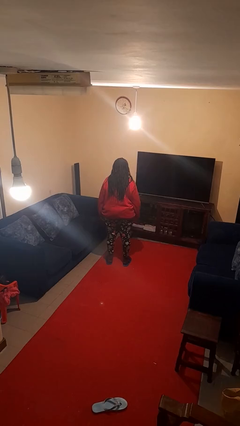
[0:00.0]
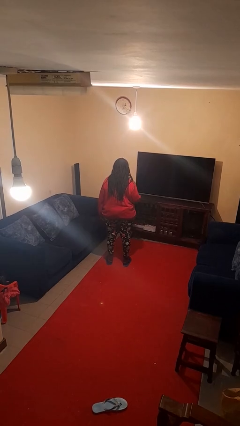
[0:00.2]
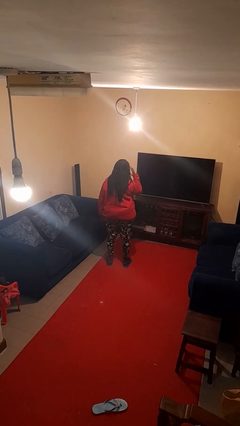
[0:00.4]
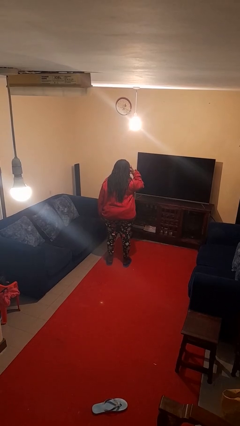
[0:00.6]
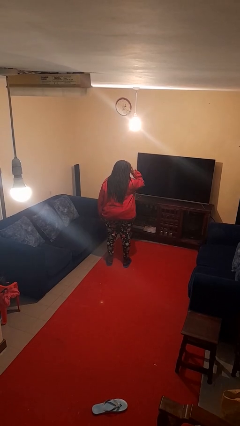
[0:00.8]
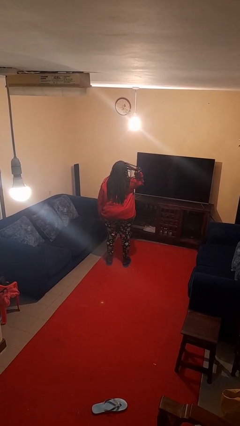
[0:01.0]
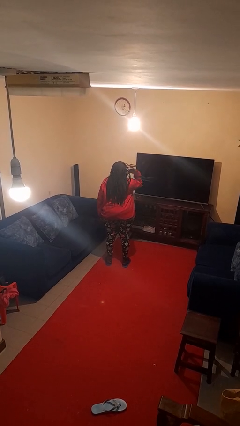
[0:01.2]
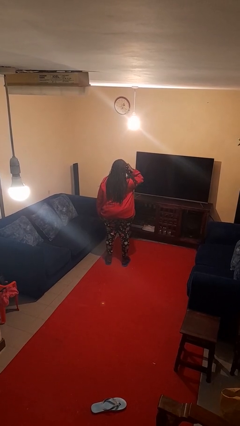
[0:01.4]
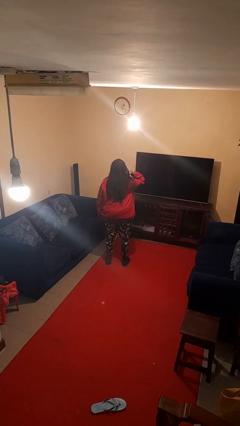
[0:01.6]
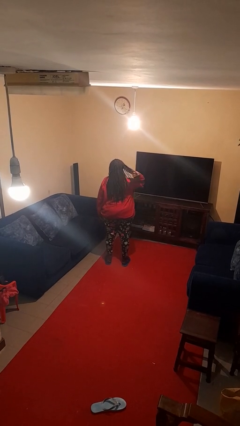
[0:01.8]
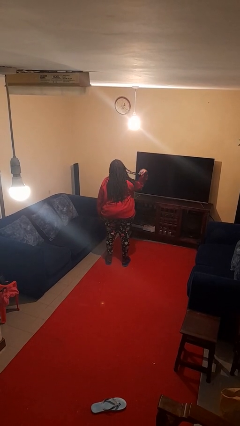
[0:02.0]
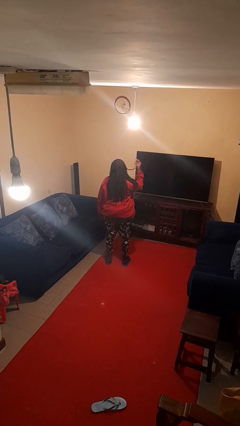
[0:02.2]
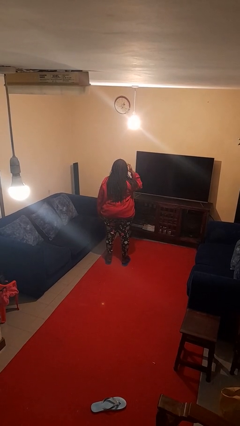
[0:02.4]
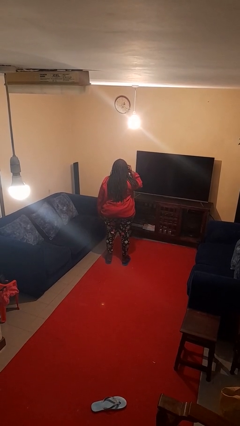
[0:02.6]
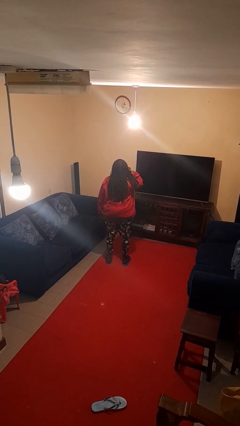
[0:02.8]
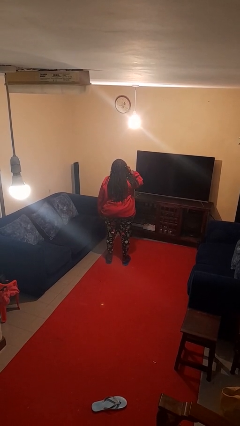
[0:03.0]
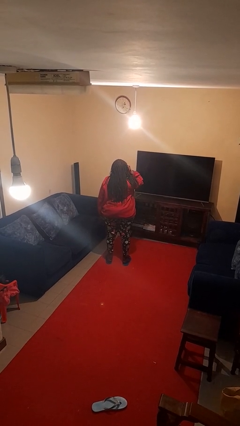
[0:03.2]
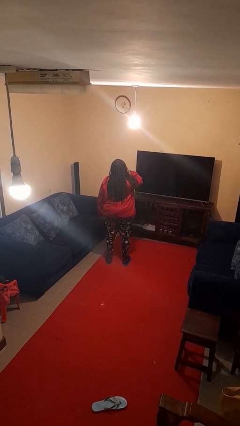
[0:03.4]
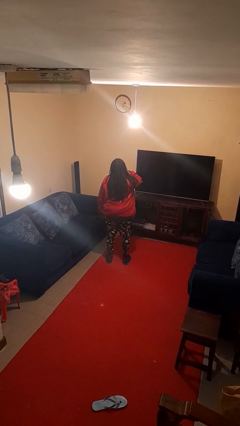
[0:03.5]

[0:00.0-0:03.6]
person strokes hair

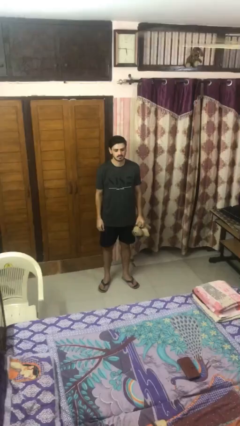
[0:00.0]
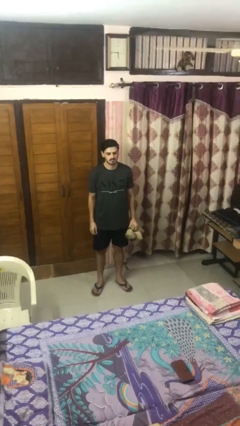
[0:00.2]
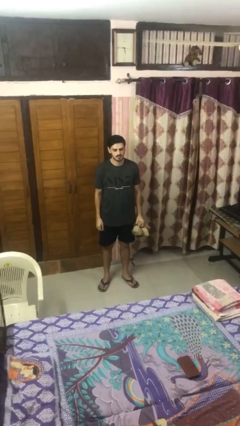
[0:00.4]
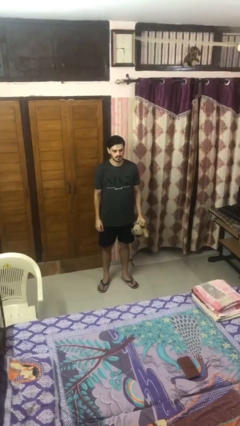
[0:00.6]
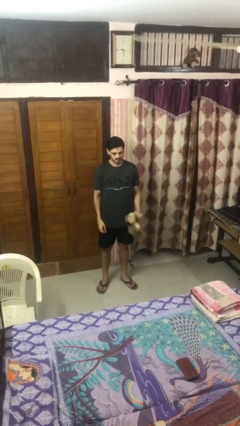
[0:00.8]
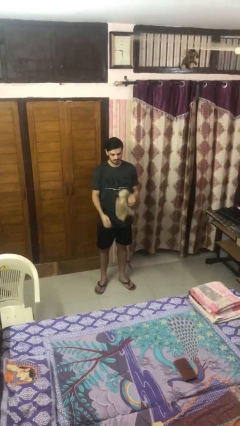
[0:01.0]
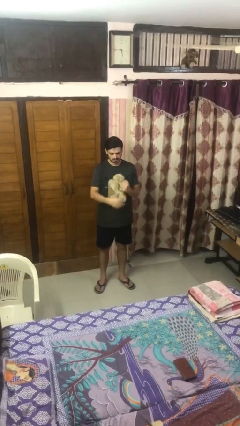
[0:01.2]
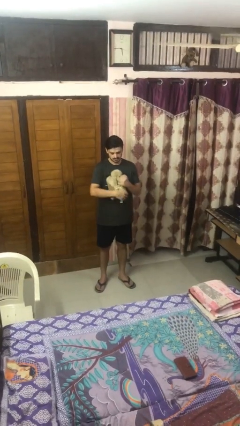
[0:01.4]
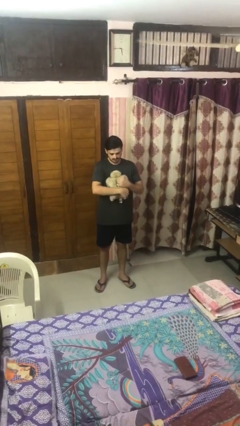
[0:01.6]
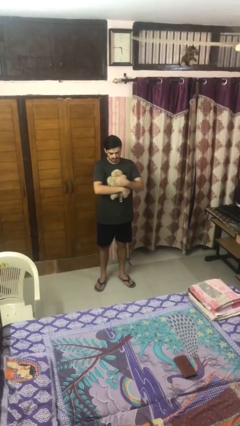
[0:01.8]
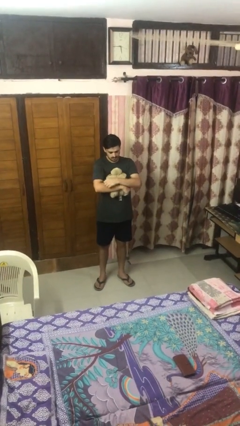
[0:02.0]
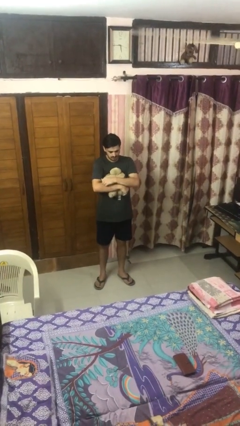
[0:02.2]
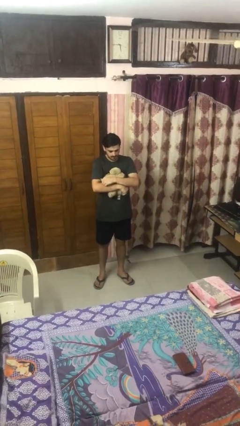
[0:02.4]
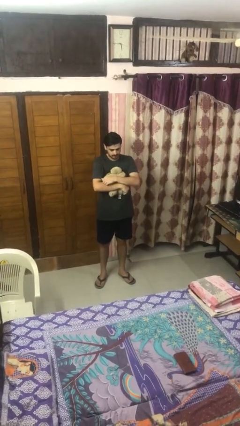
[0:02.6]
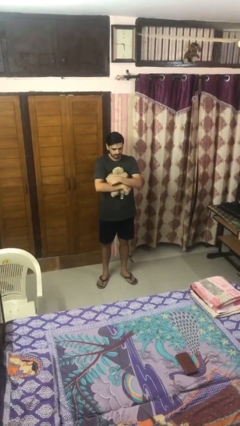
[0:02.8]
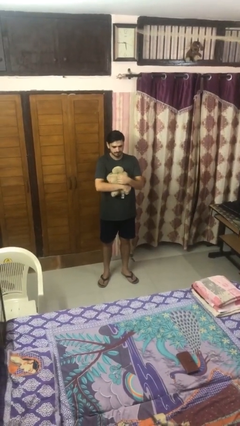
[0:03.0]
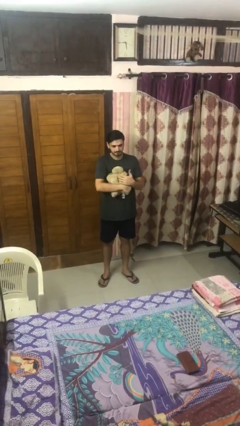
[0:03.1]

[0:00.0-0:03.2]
person hugs stuffed animal

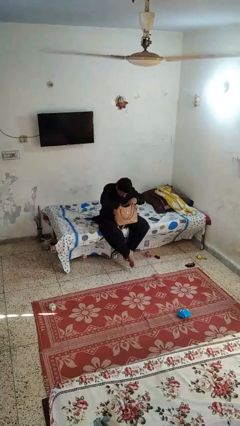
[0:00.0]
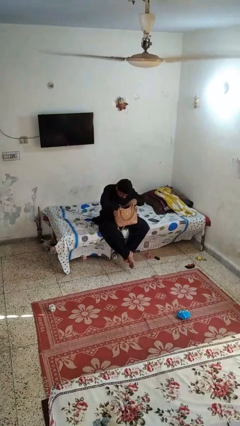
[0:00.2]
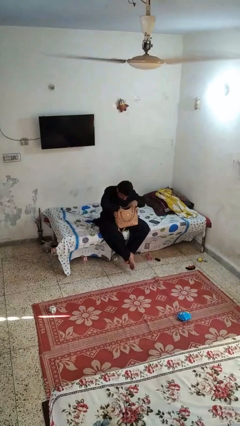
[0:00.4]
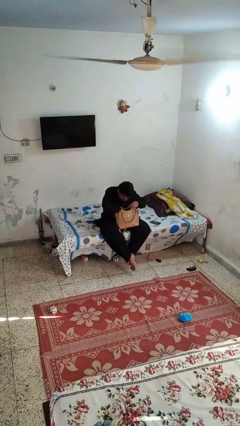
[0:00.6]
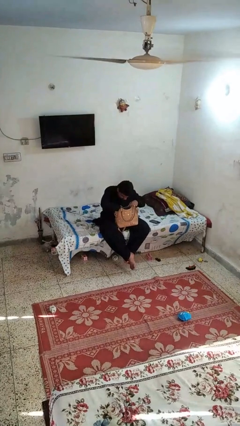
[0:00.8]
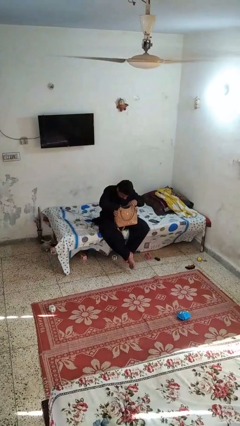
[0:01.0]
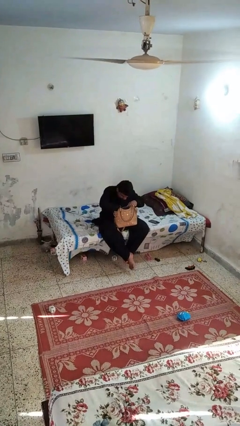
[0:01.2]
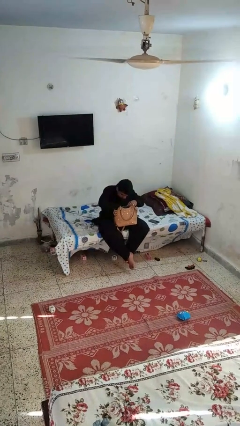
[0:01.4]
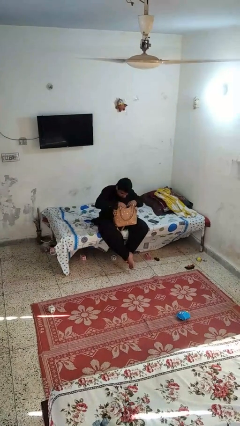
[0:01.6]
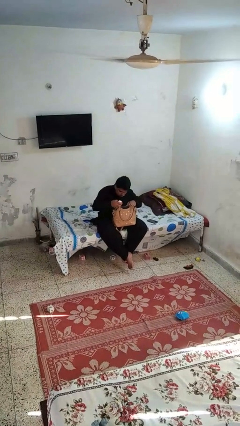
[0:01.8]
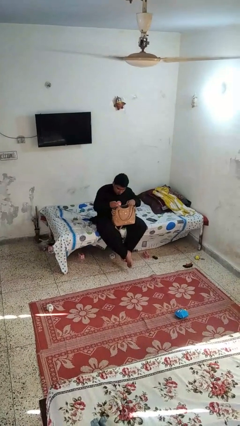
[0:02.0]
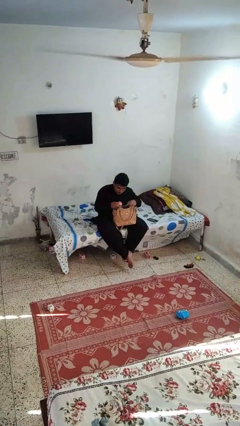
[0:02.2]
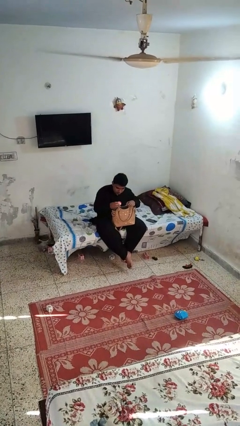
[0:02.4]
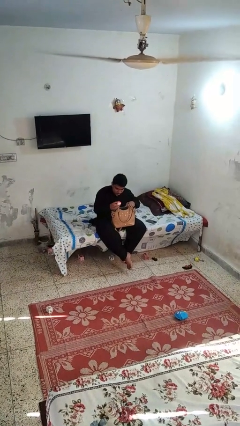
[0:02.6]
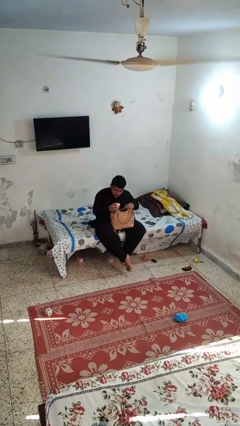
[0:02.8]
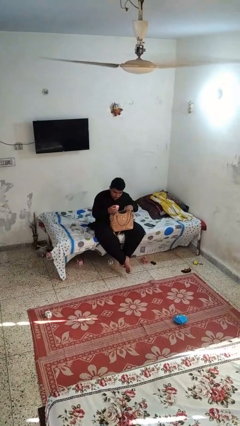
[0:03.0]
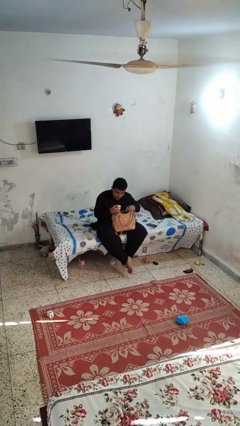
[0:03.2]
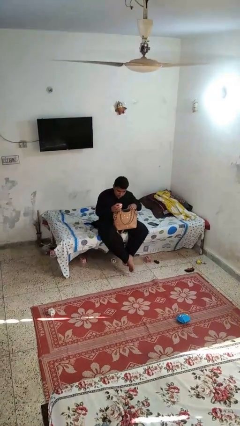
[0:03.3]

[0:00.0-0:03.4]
person takes object from purse

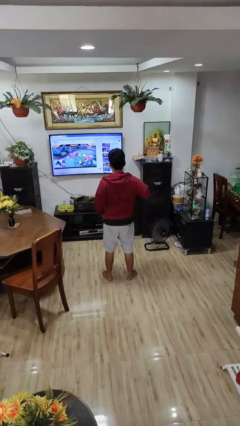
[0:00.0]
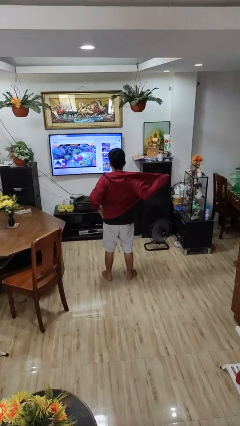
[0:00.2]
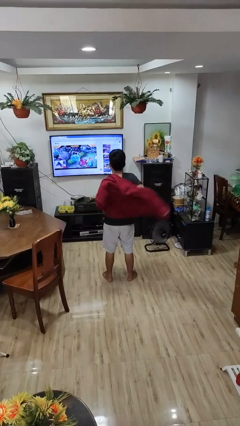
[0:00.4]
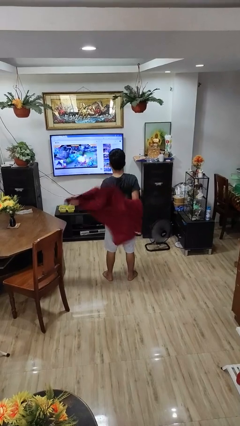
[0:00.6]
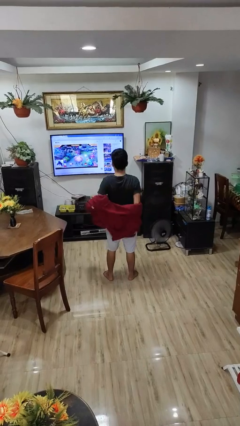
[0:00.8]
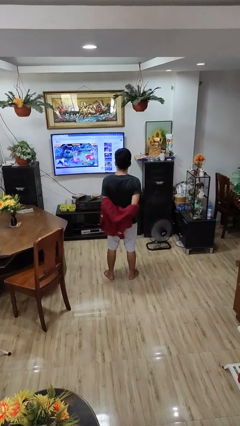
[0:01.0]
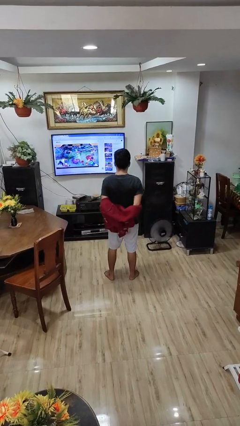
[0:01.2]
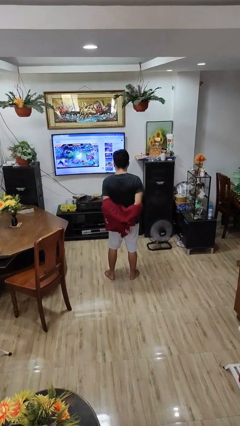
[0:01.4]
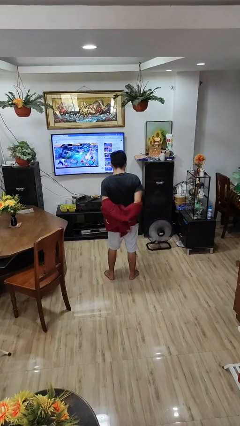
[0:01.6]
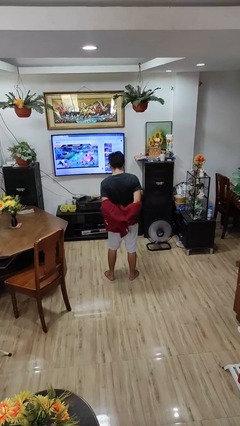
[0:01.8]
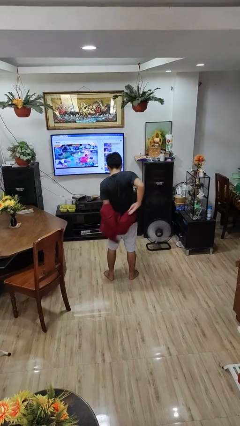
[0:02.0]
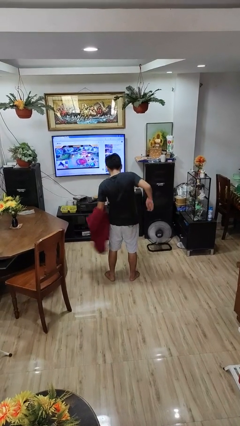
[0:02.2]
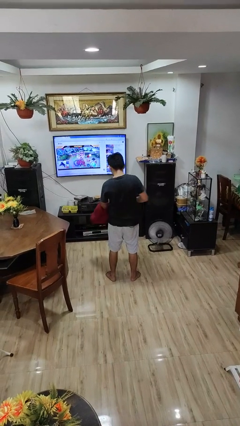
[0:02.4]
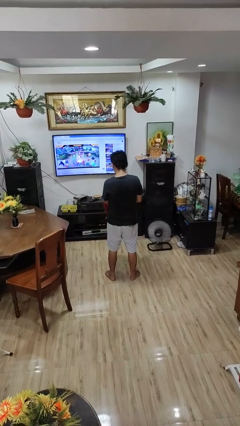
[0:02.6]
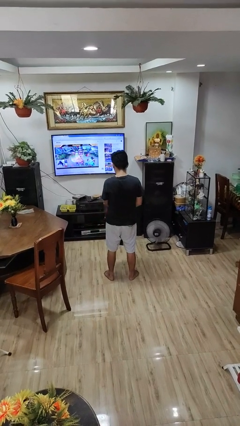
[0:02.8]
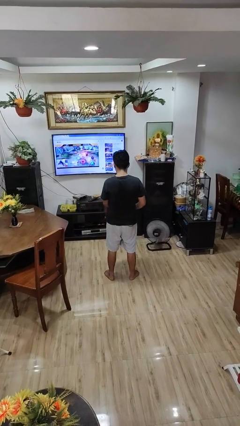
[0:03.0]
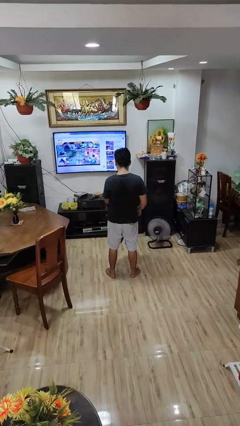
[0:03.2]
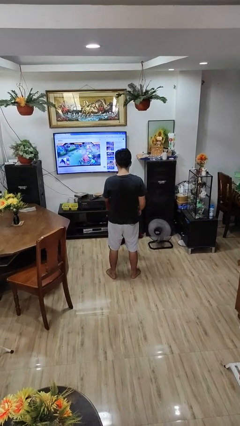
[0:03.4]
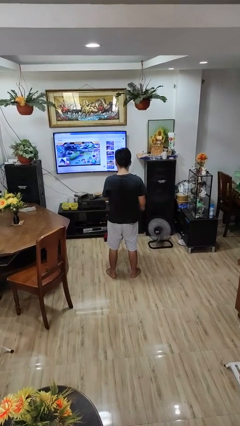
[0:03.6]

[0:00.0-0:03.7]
person takes off jacket

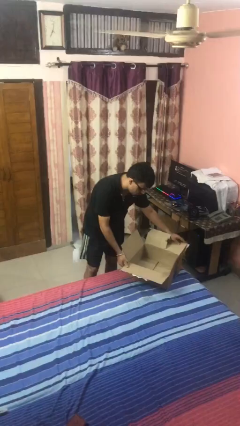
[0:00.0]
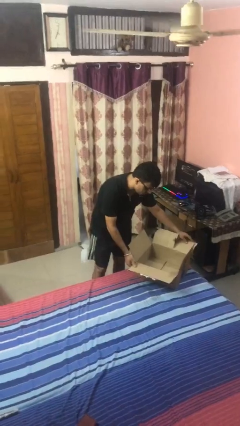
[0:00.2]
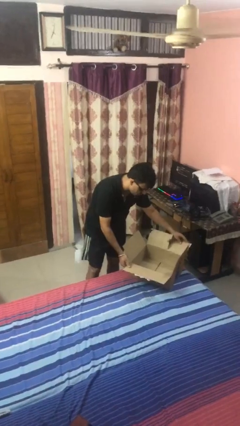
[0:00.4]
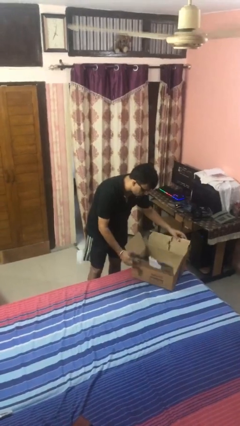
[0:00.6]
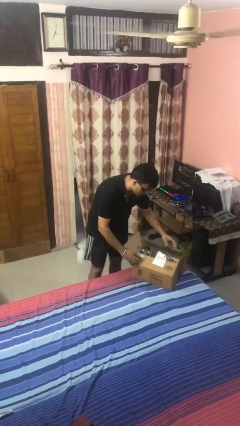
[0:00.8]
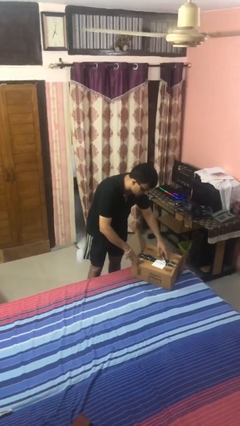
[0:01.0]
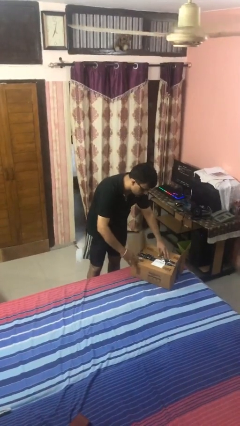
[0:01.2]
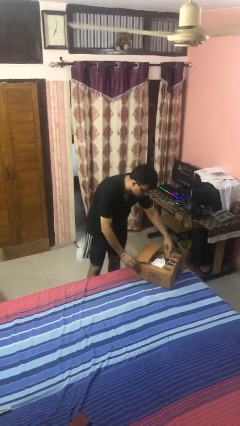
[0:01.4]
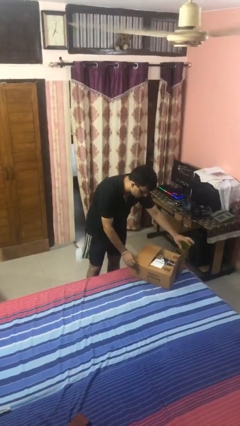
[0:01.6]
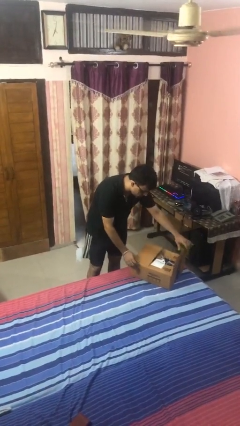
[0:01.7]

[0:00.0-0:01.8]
person closes box

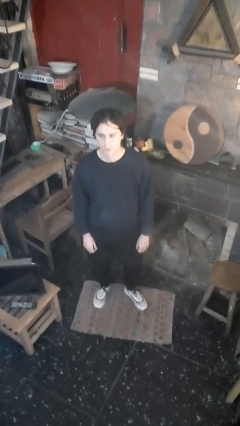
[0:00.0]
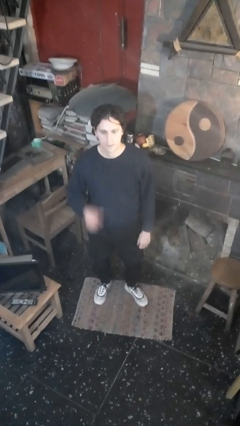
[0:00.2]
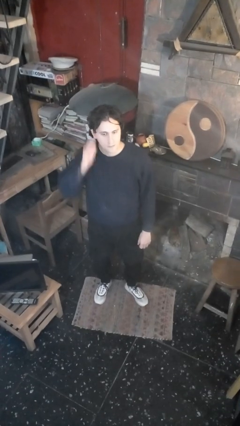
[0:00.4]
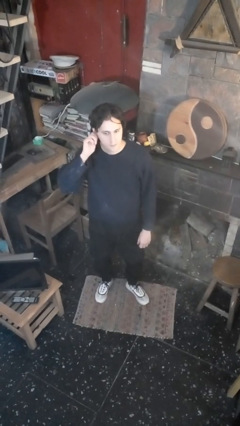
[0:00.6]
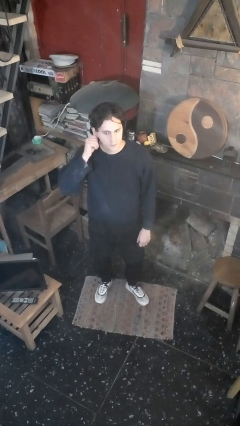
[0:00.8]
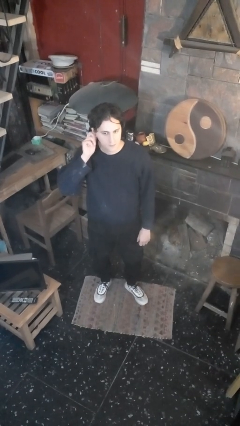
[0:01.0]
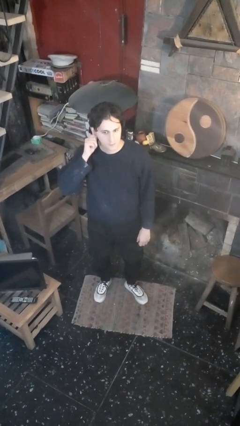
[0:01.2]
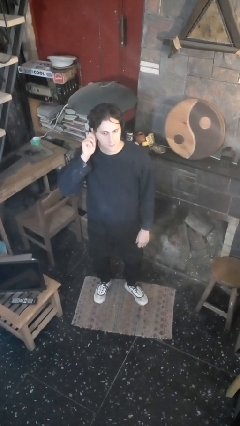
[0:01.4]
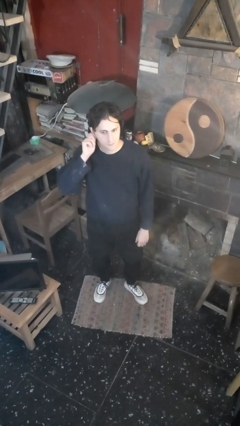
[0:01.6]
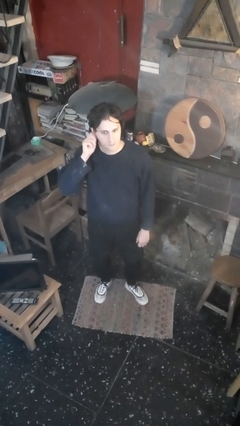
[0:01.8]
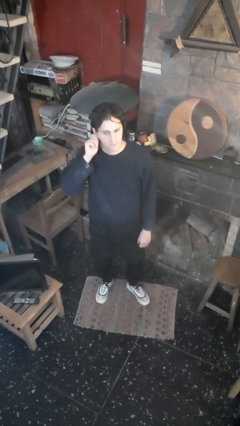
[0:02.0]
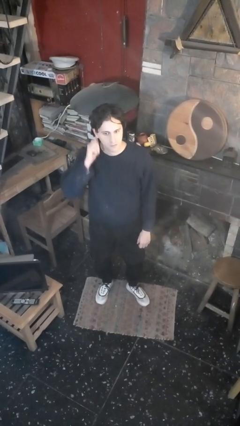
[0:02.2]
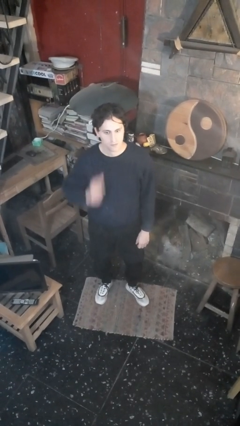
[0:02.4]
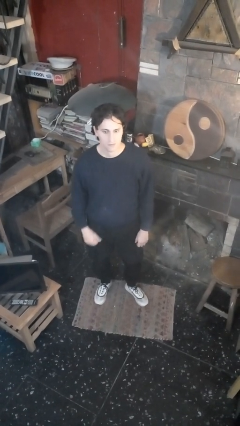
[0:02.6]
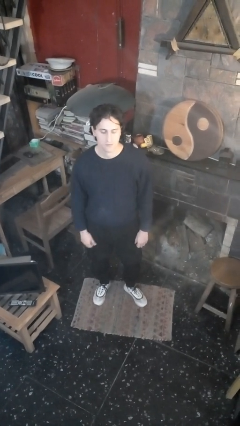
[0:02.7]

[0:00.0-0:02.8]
person touches earlobe
